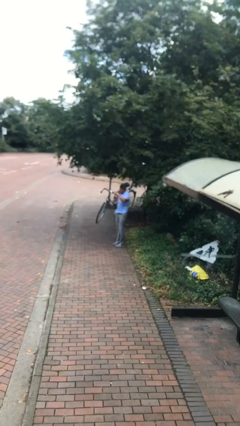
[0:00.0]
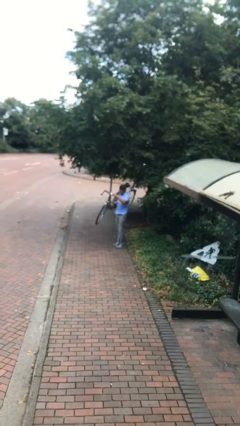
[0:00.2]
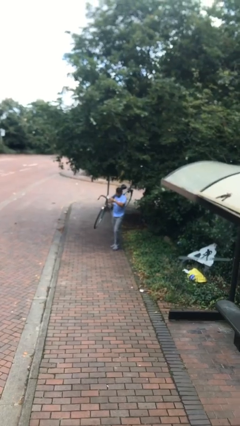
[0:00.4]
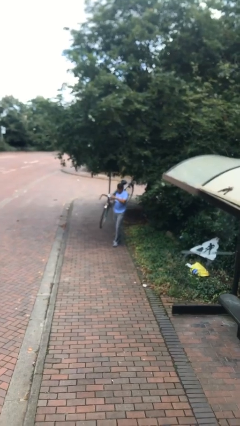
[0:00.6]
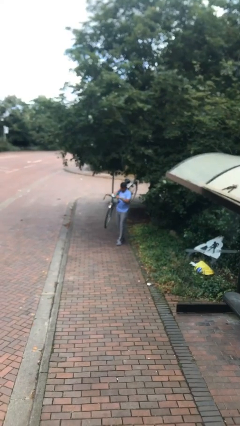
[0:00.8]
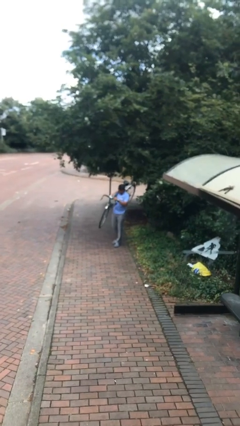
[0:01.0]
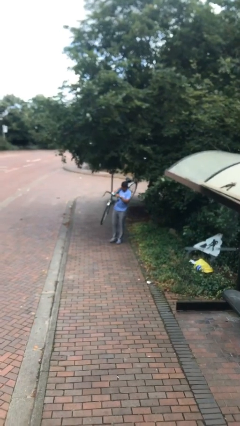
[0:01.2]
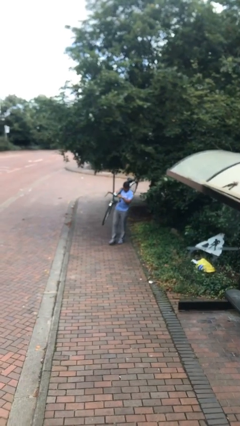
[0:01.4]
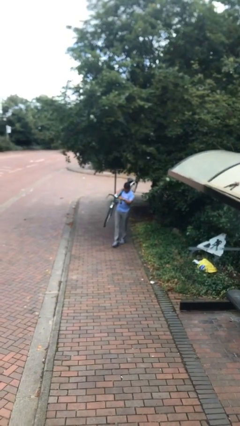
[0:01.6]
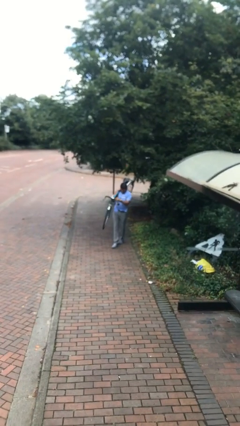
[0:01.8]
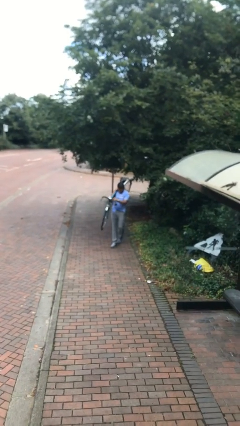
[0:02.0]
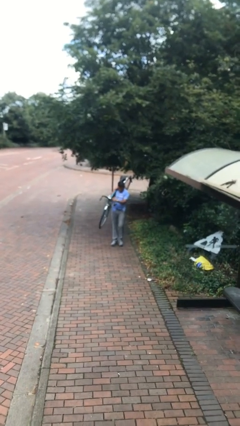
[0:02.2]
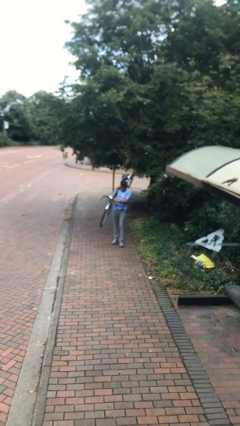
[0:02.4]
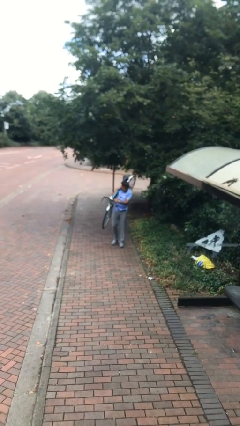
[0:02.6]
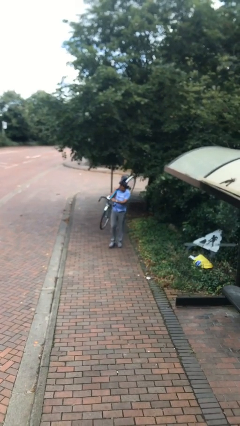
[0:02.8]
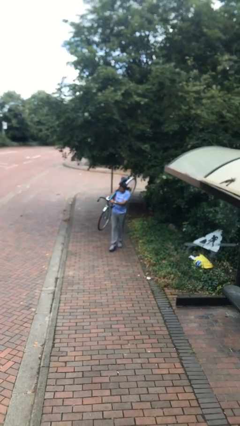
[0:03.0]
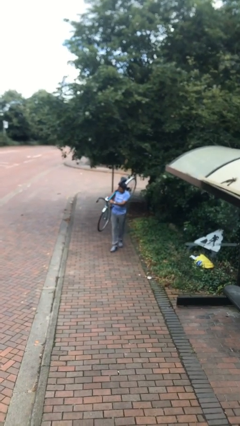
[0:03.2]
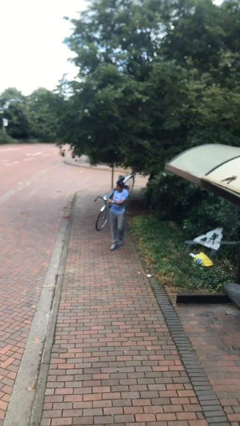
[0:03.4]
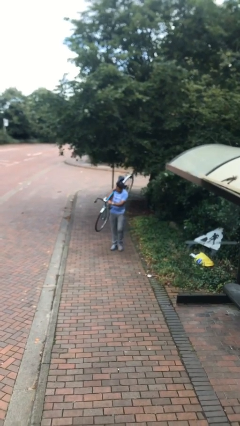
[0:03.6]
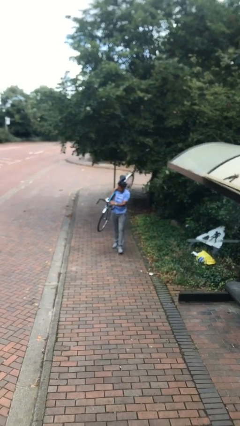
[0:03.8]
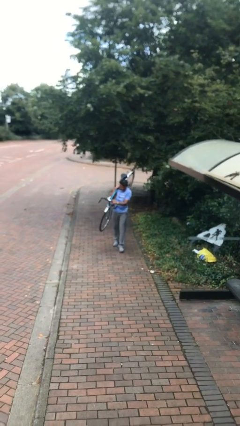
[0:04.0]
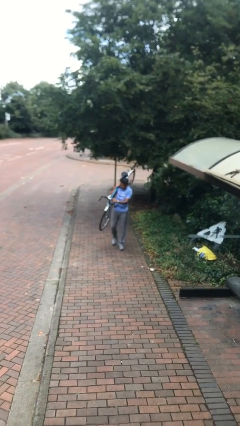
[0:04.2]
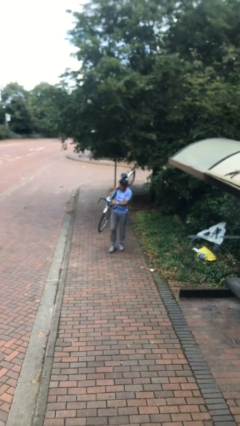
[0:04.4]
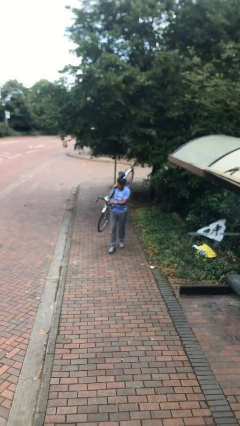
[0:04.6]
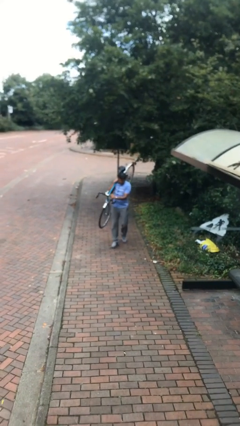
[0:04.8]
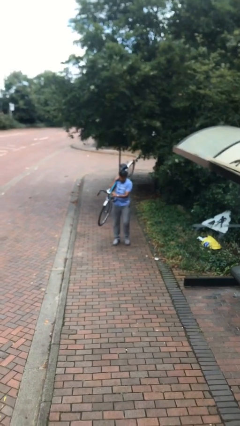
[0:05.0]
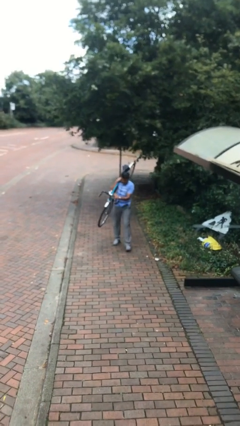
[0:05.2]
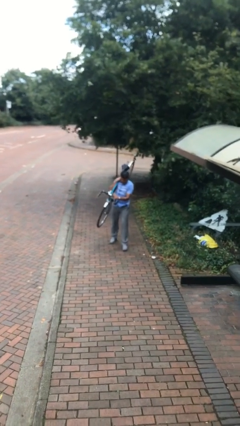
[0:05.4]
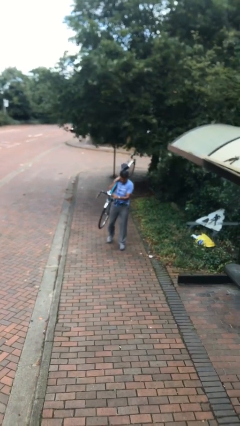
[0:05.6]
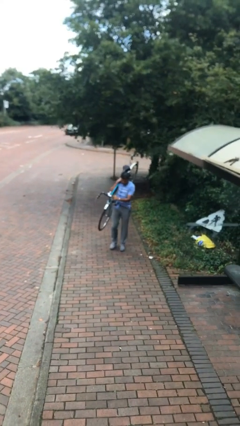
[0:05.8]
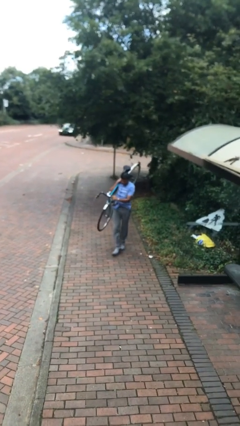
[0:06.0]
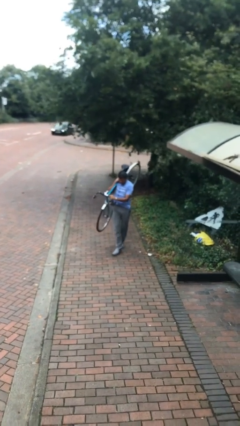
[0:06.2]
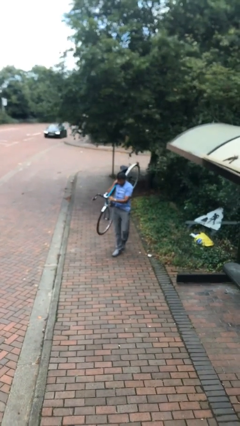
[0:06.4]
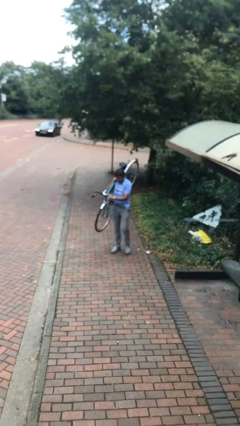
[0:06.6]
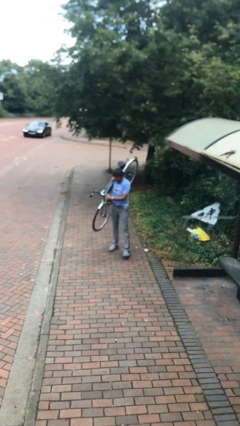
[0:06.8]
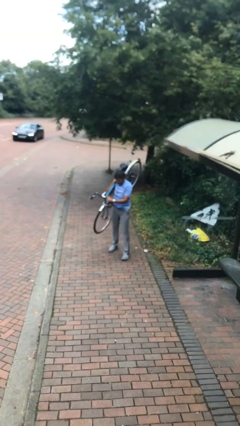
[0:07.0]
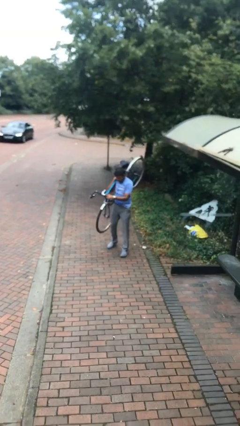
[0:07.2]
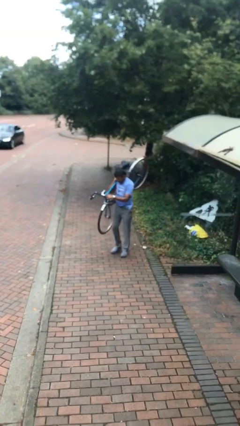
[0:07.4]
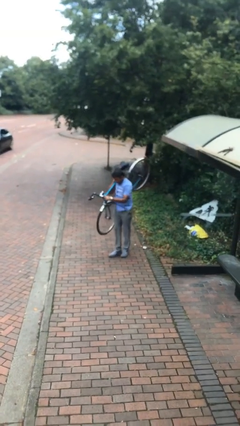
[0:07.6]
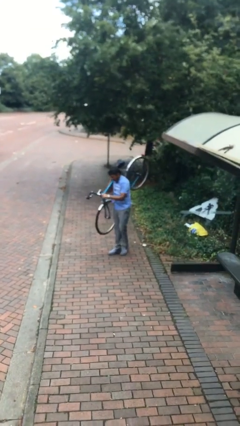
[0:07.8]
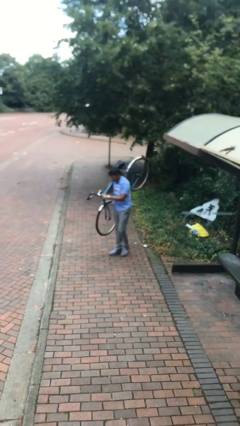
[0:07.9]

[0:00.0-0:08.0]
person carries heavy object

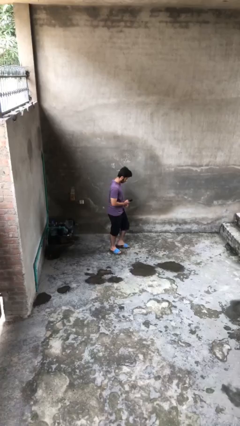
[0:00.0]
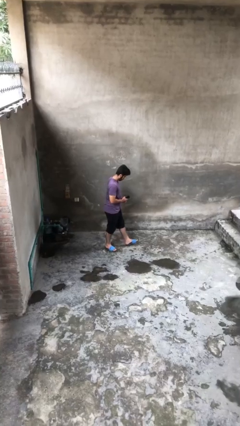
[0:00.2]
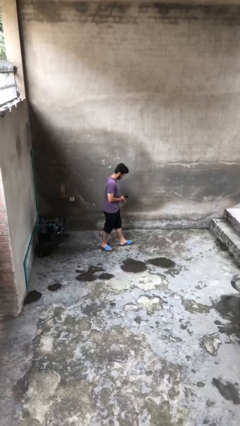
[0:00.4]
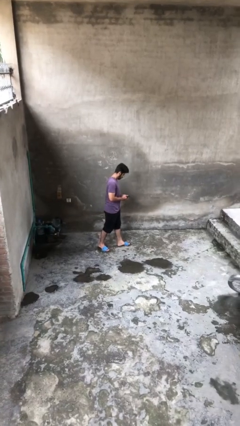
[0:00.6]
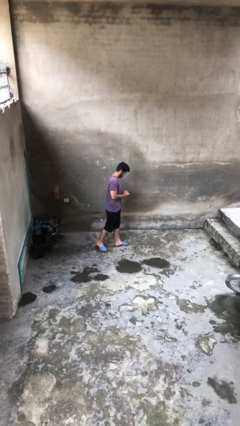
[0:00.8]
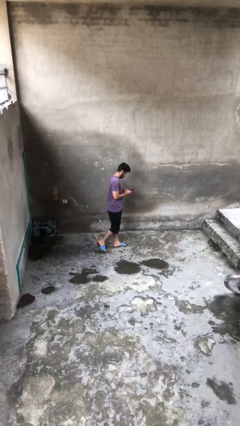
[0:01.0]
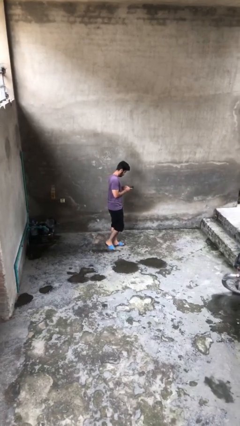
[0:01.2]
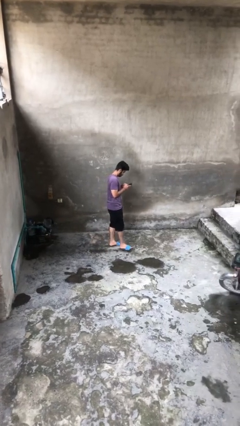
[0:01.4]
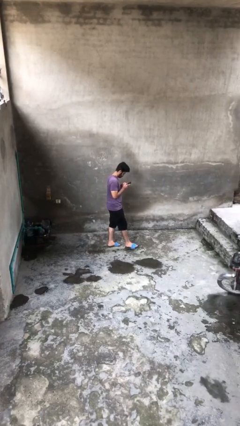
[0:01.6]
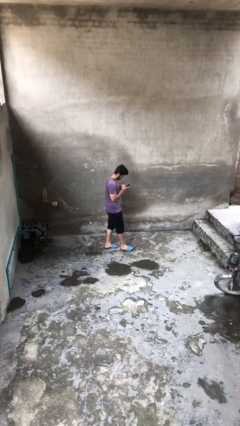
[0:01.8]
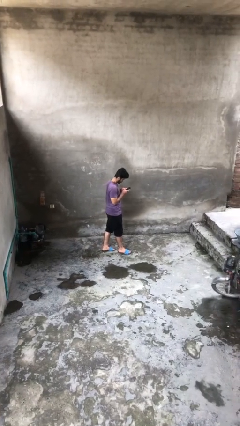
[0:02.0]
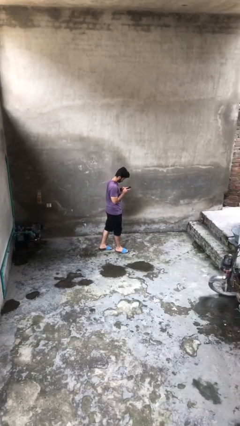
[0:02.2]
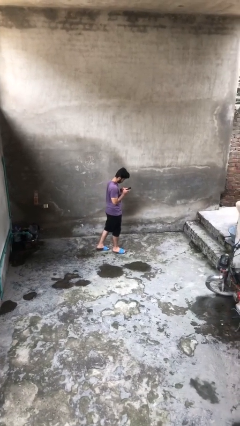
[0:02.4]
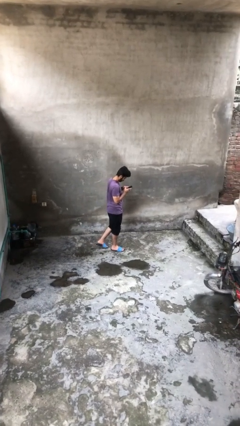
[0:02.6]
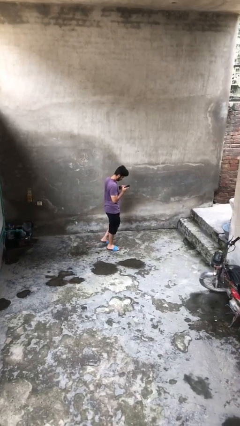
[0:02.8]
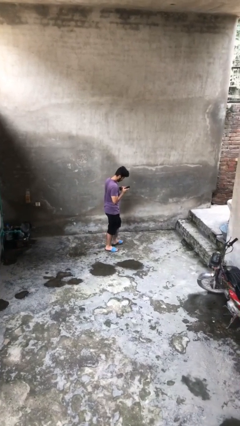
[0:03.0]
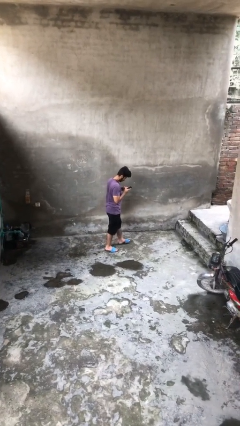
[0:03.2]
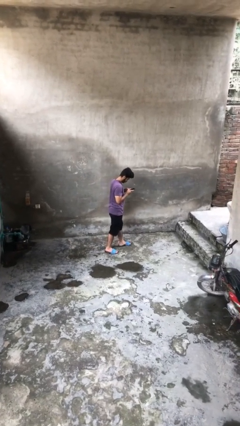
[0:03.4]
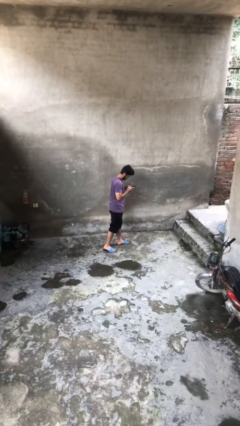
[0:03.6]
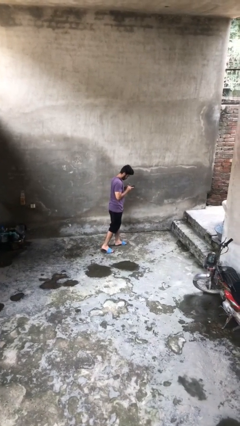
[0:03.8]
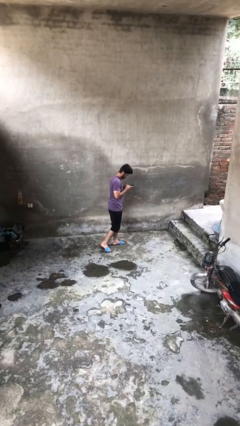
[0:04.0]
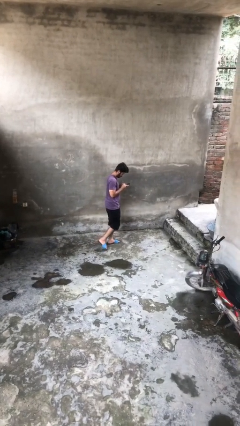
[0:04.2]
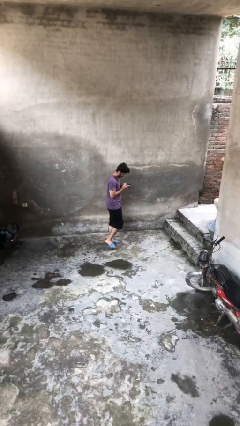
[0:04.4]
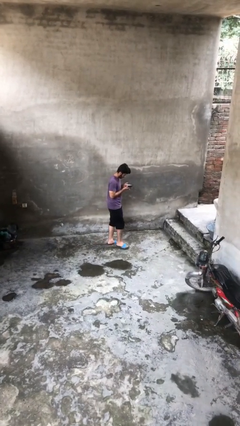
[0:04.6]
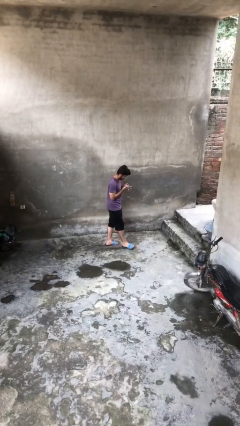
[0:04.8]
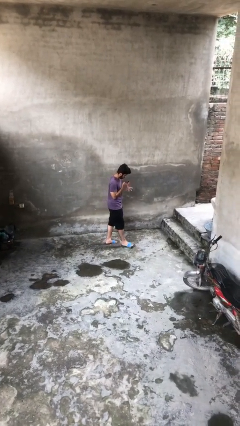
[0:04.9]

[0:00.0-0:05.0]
person texts on phone

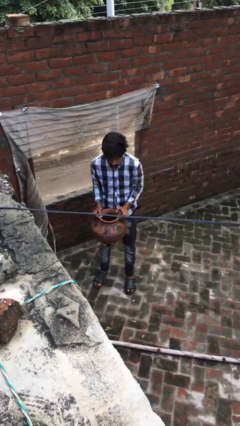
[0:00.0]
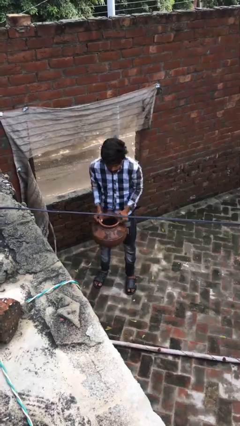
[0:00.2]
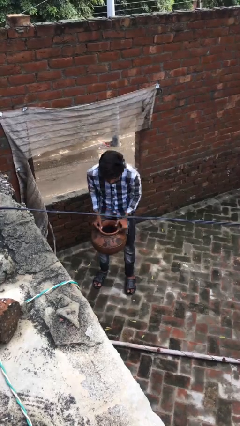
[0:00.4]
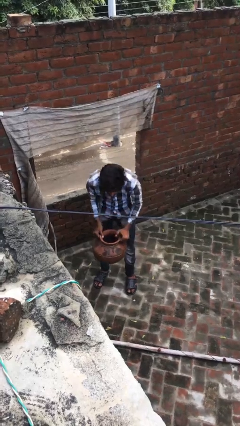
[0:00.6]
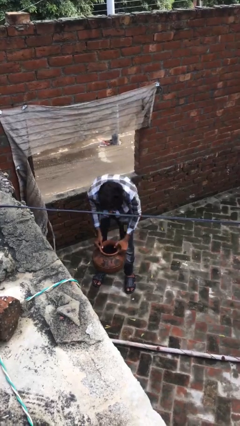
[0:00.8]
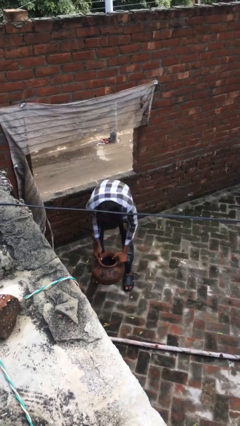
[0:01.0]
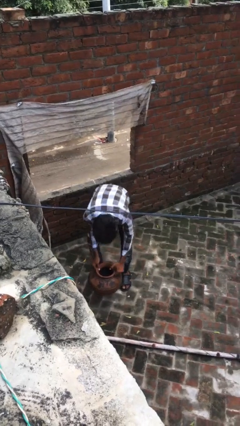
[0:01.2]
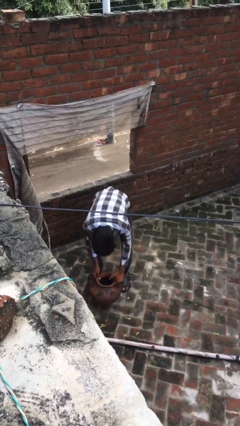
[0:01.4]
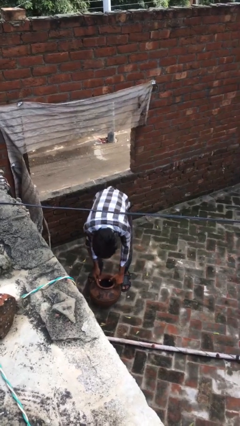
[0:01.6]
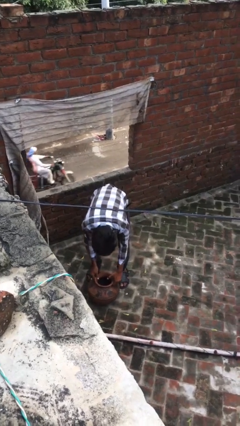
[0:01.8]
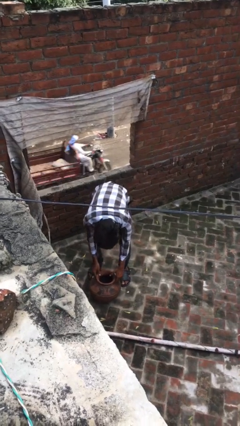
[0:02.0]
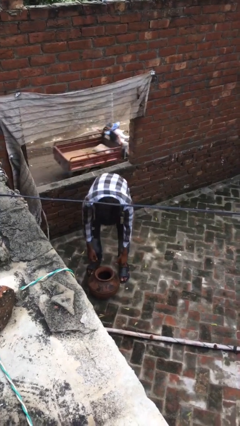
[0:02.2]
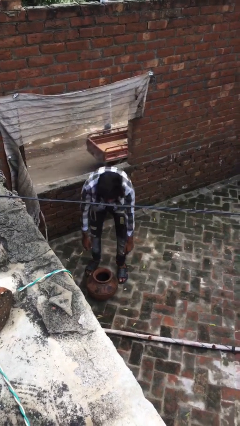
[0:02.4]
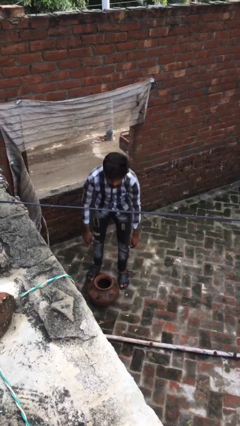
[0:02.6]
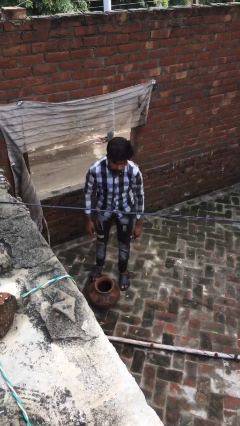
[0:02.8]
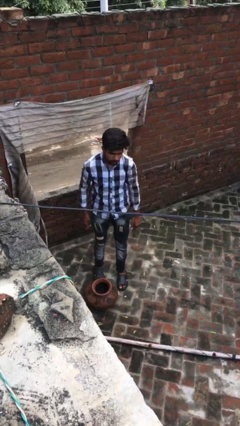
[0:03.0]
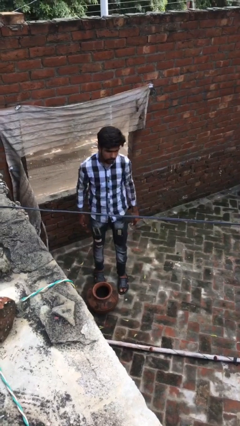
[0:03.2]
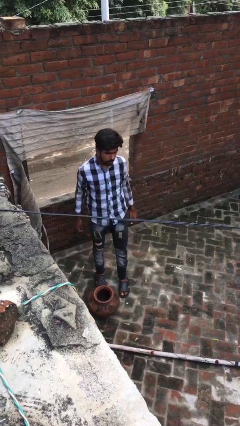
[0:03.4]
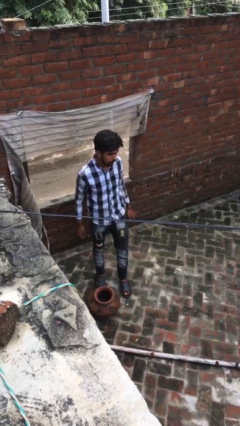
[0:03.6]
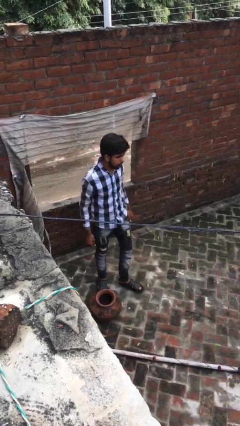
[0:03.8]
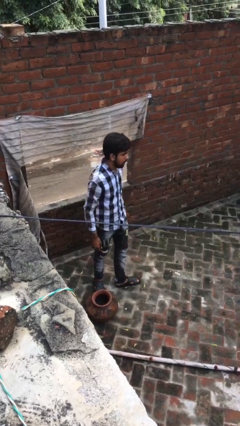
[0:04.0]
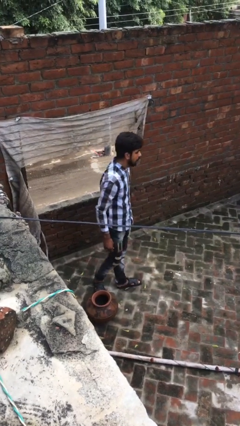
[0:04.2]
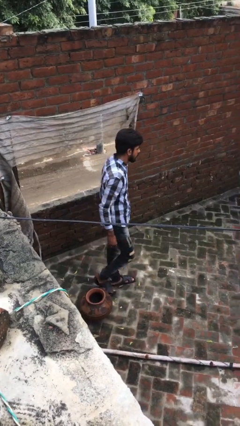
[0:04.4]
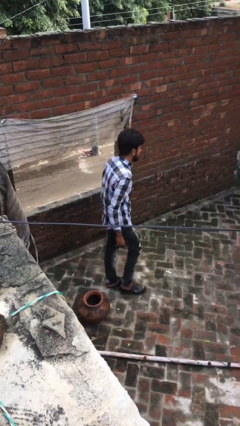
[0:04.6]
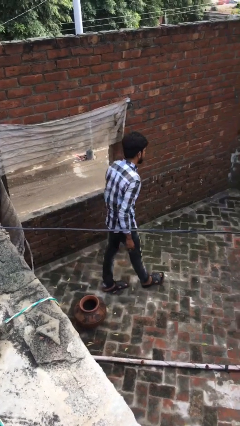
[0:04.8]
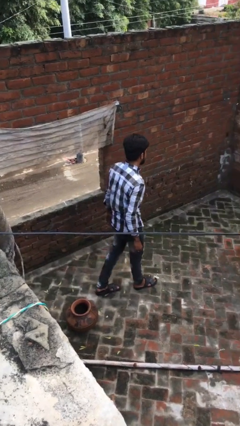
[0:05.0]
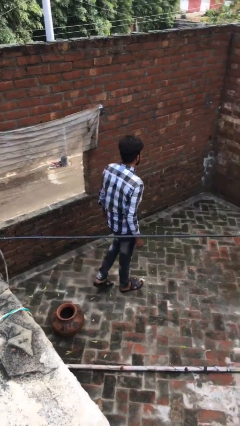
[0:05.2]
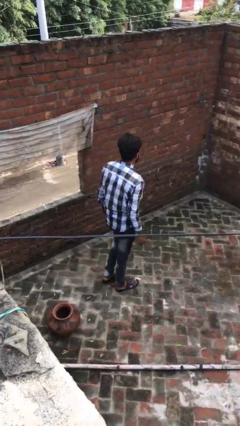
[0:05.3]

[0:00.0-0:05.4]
person puts down object on floor
